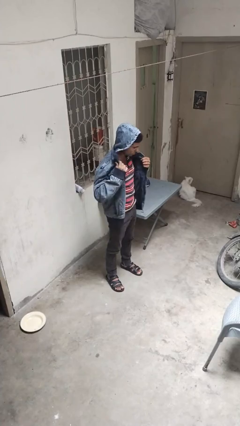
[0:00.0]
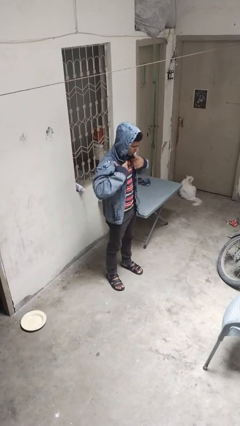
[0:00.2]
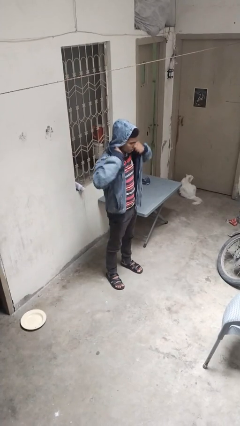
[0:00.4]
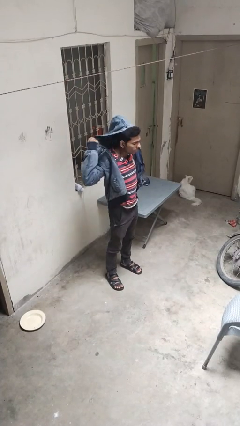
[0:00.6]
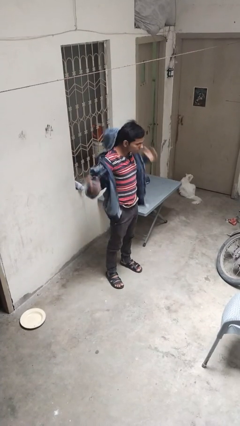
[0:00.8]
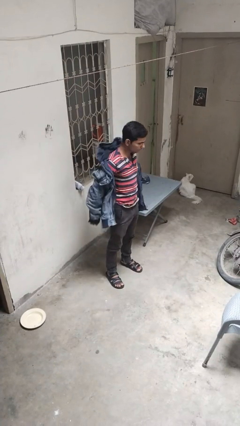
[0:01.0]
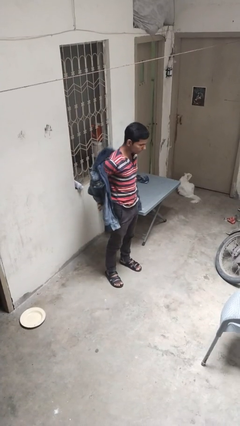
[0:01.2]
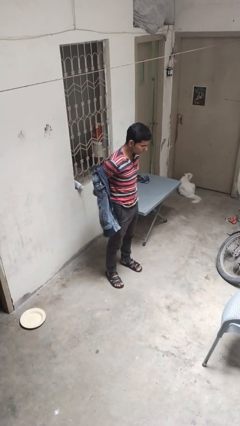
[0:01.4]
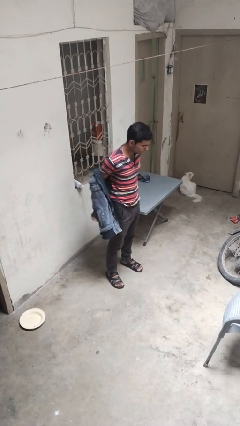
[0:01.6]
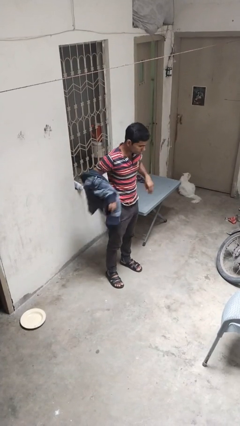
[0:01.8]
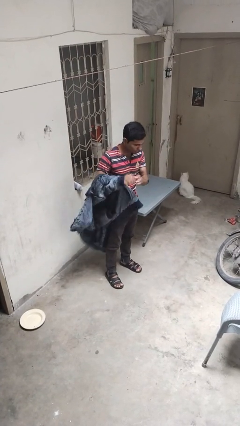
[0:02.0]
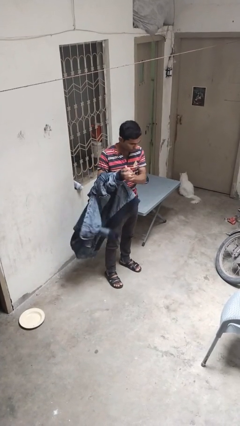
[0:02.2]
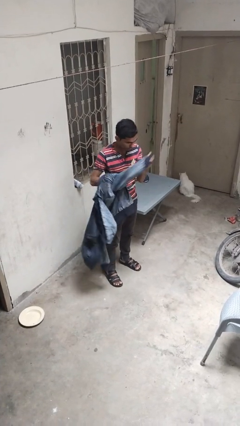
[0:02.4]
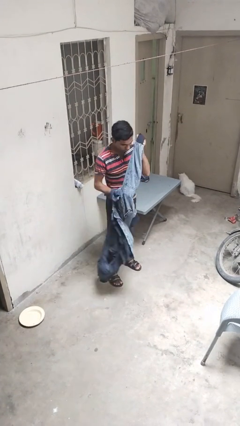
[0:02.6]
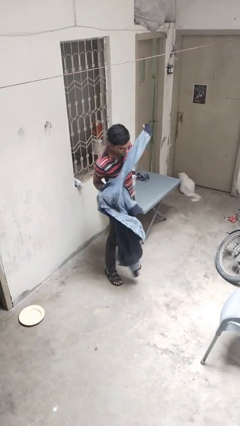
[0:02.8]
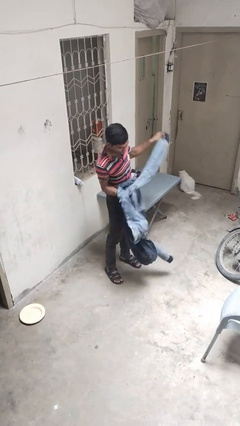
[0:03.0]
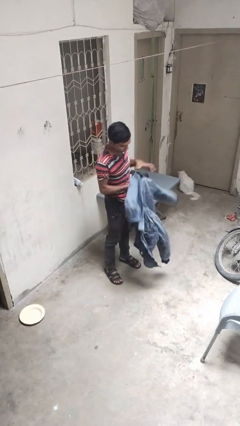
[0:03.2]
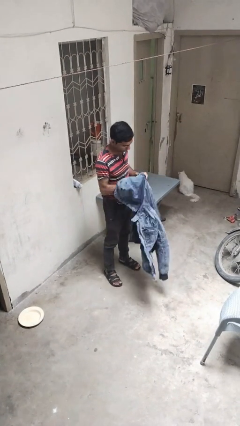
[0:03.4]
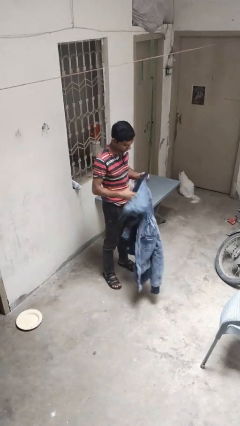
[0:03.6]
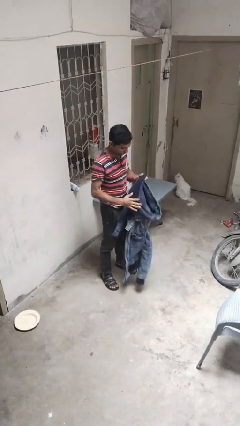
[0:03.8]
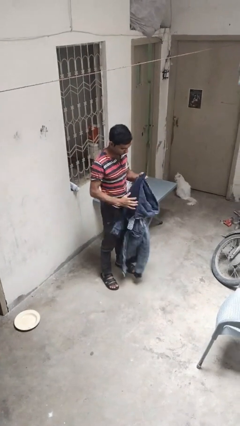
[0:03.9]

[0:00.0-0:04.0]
person takes off hoodie

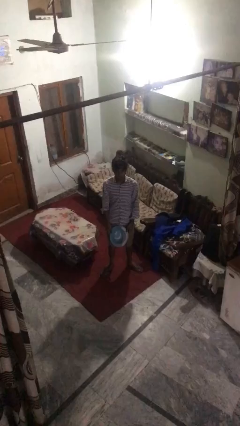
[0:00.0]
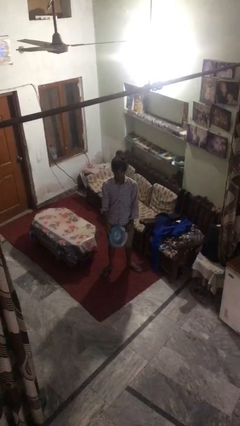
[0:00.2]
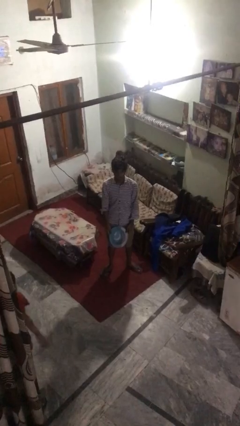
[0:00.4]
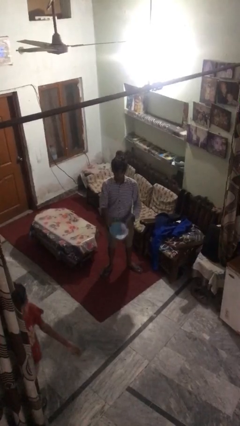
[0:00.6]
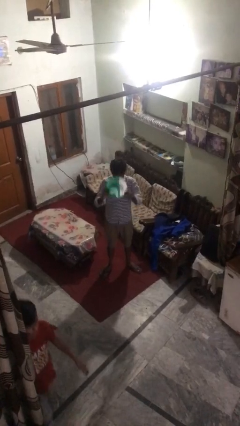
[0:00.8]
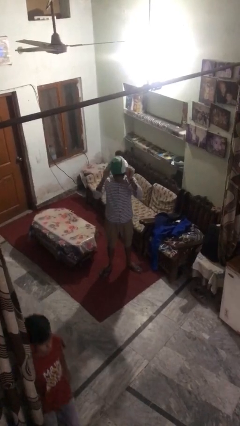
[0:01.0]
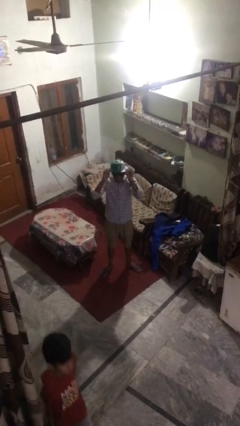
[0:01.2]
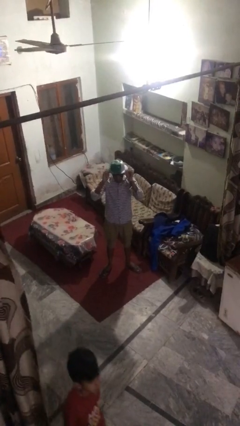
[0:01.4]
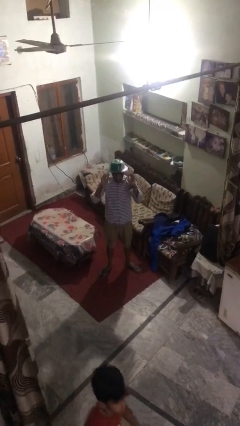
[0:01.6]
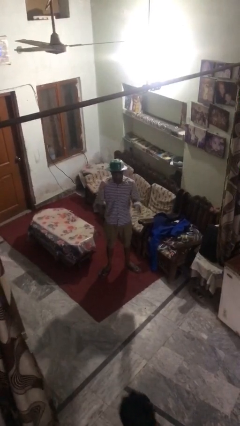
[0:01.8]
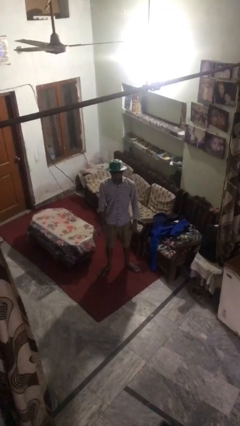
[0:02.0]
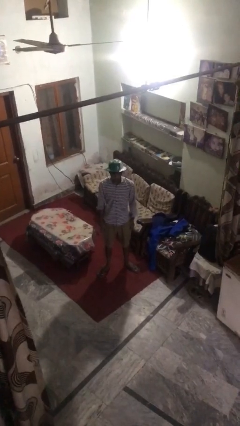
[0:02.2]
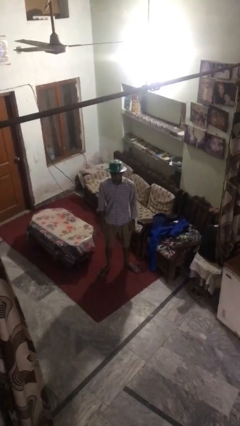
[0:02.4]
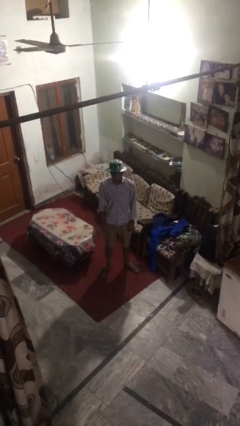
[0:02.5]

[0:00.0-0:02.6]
person puts on hat

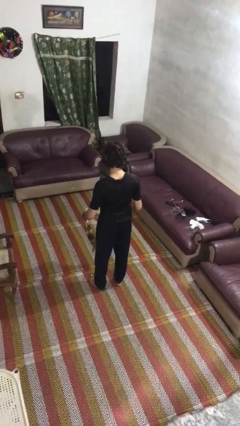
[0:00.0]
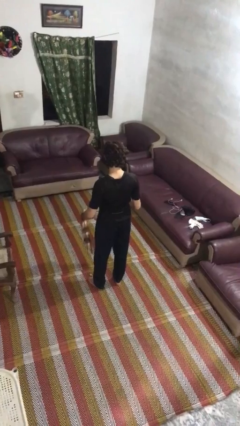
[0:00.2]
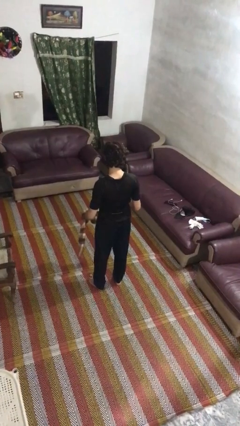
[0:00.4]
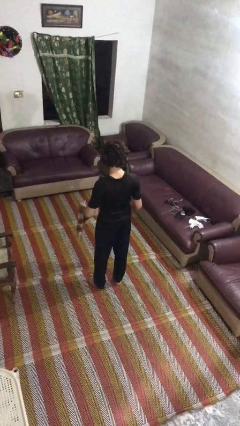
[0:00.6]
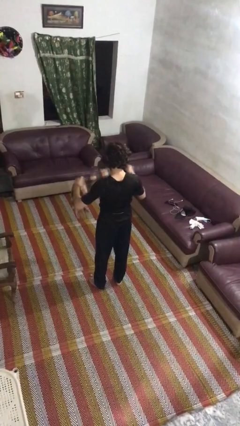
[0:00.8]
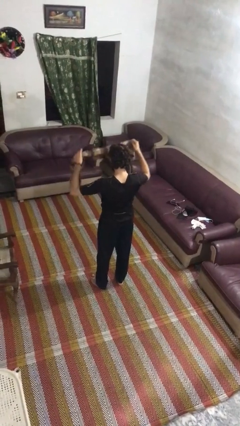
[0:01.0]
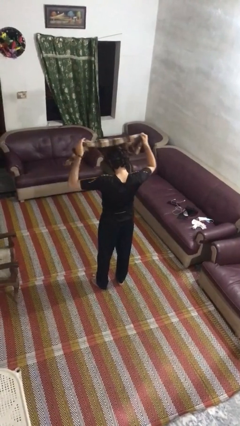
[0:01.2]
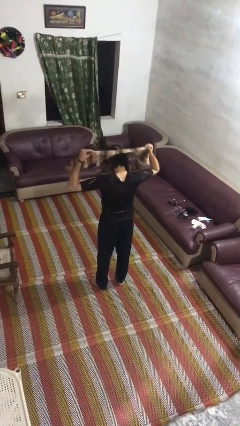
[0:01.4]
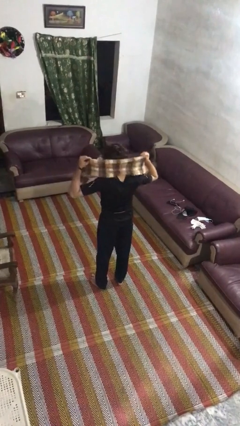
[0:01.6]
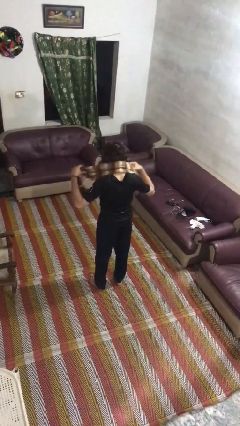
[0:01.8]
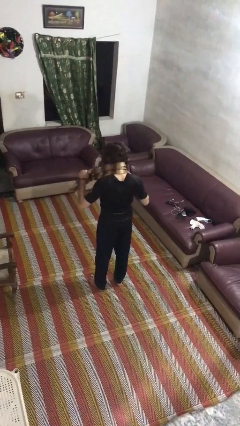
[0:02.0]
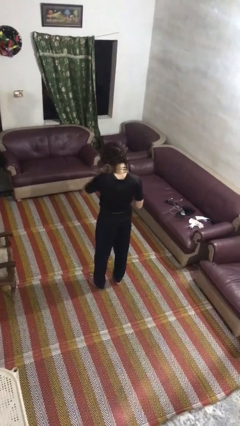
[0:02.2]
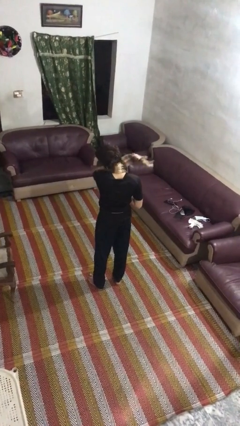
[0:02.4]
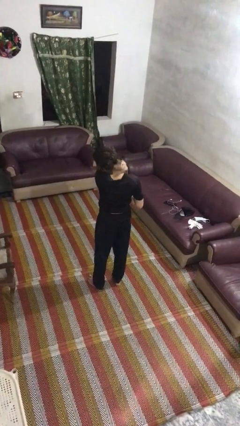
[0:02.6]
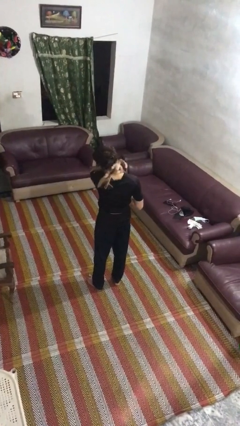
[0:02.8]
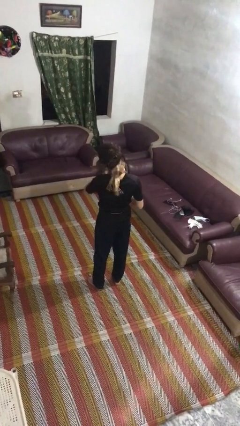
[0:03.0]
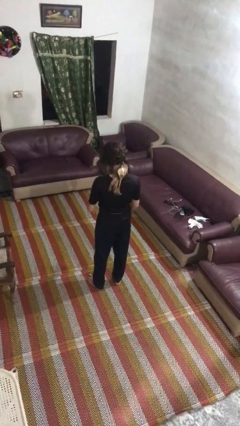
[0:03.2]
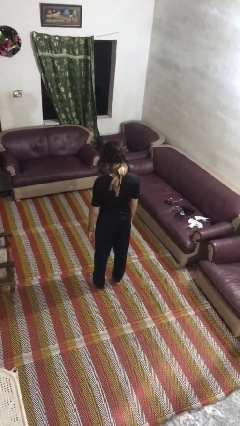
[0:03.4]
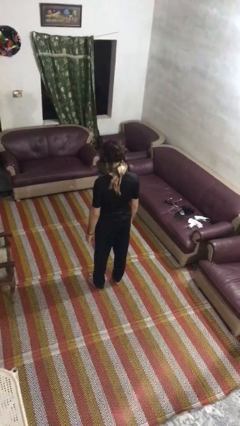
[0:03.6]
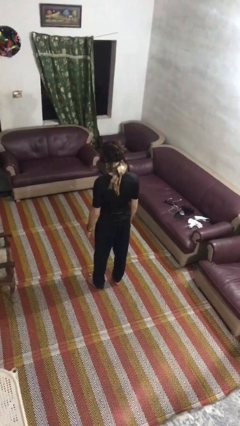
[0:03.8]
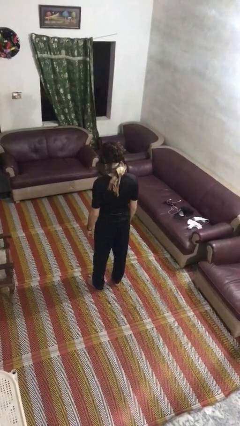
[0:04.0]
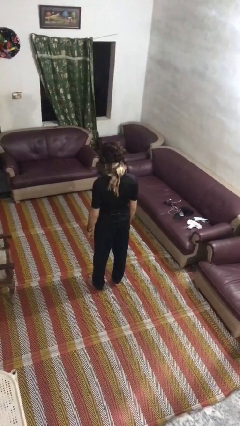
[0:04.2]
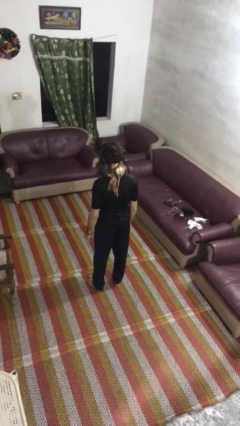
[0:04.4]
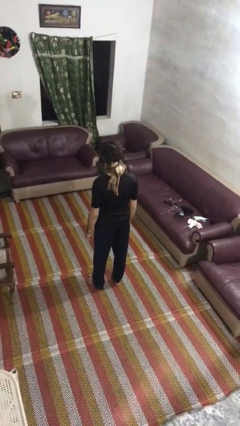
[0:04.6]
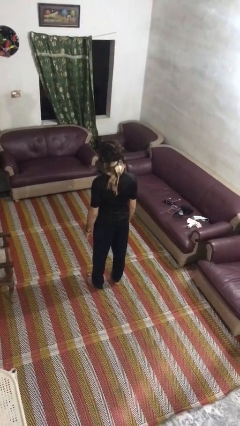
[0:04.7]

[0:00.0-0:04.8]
person puts on scarf

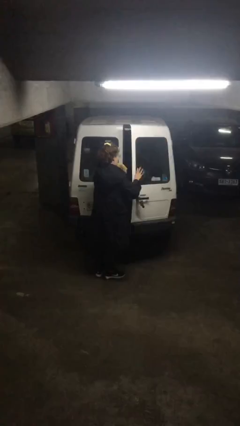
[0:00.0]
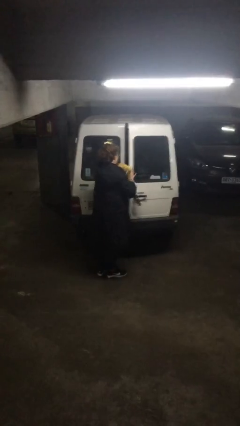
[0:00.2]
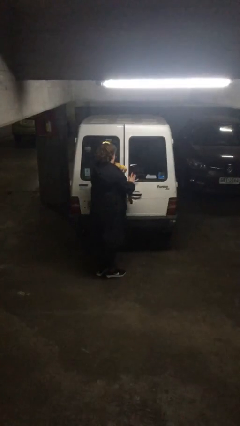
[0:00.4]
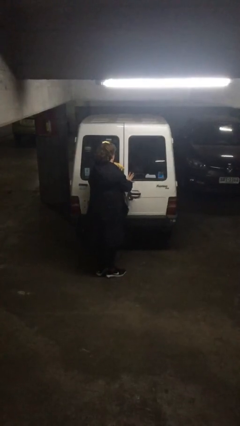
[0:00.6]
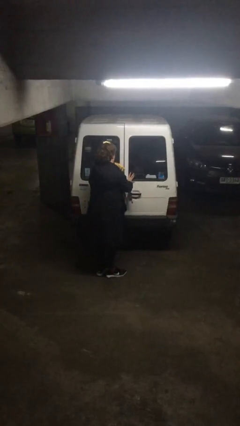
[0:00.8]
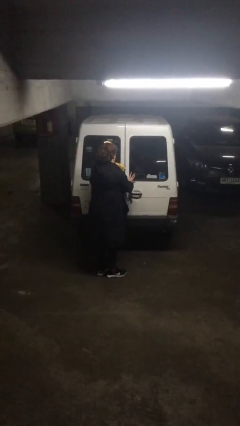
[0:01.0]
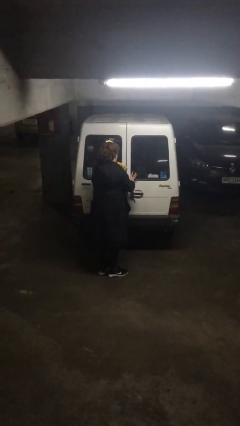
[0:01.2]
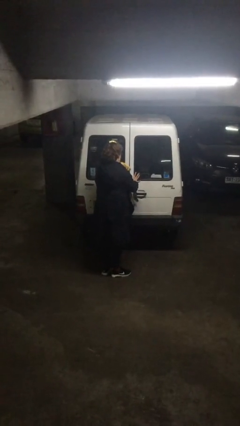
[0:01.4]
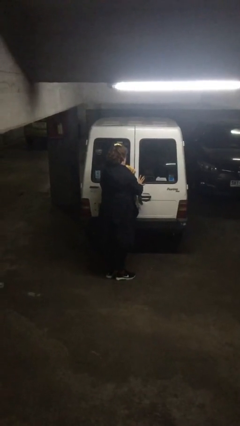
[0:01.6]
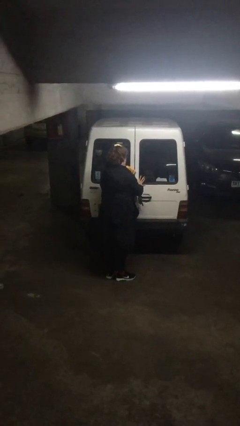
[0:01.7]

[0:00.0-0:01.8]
person closes car door

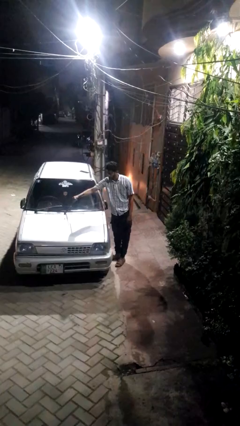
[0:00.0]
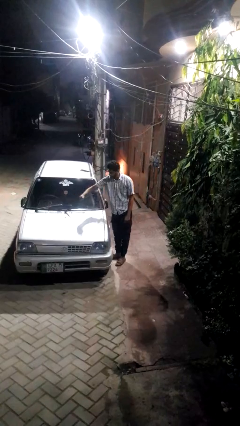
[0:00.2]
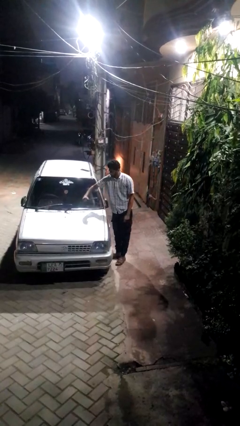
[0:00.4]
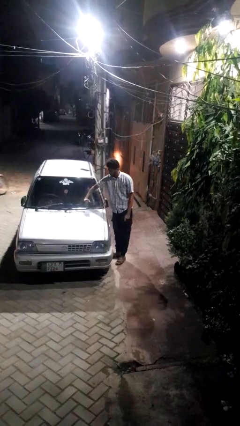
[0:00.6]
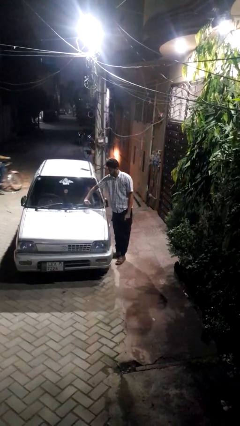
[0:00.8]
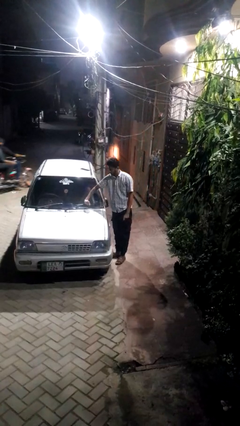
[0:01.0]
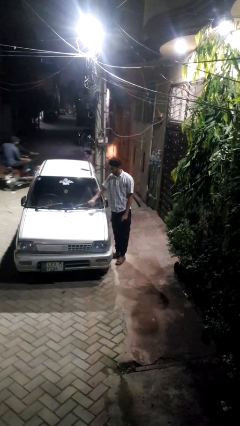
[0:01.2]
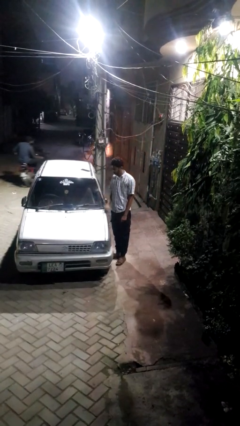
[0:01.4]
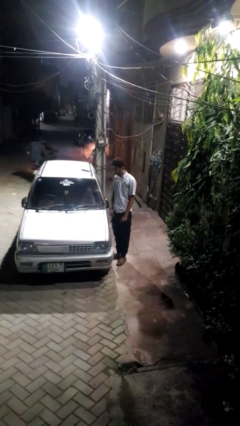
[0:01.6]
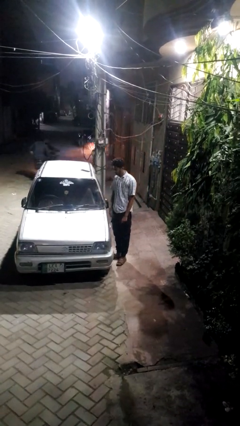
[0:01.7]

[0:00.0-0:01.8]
person flips down car wipers

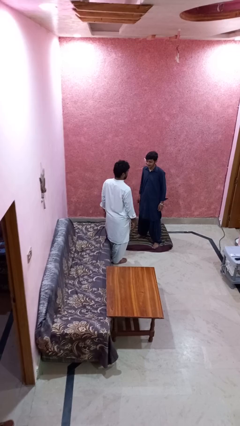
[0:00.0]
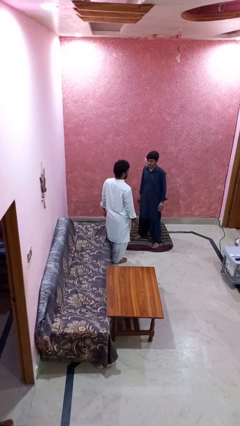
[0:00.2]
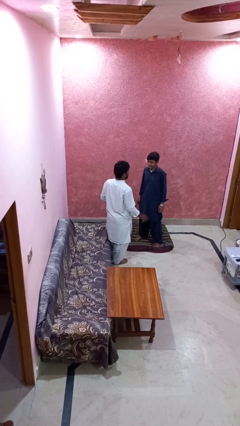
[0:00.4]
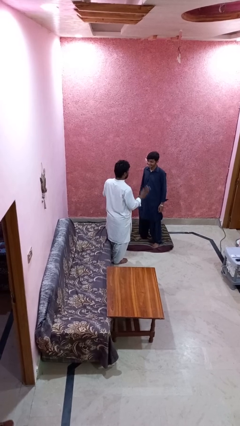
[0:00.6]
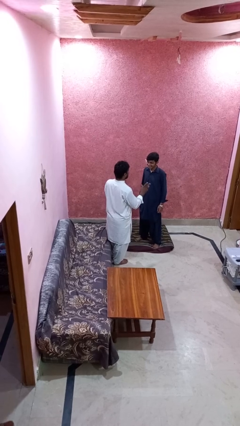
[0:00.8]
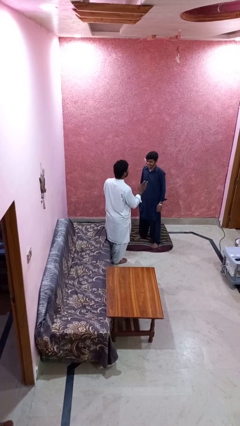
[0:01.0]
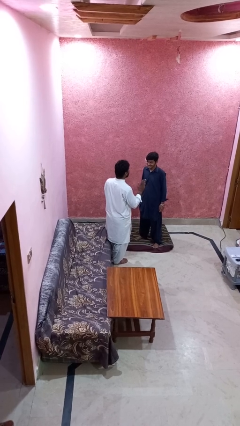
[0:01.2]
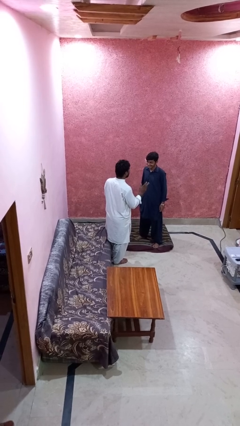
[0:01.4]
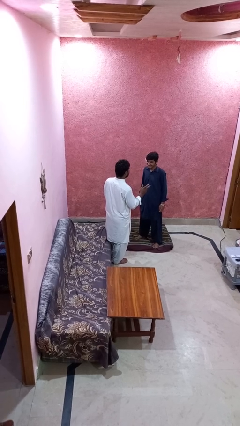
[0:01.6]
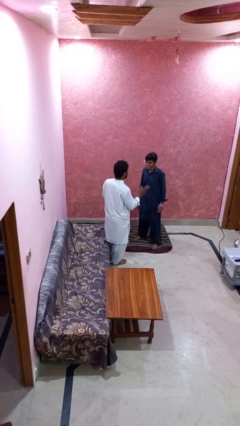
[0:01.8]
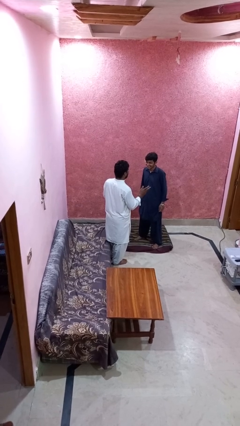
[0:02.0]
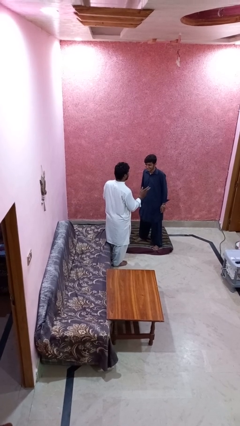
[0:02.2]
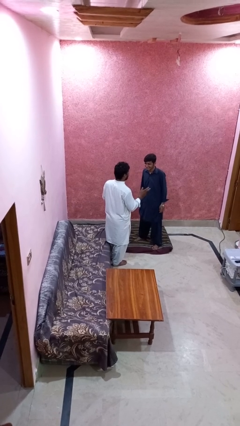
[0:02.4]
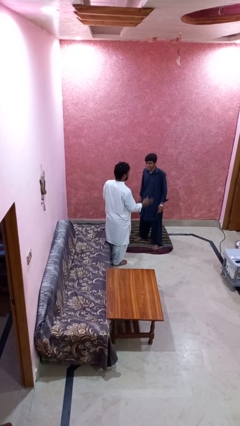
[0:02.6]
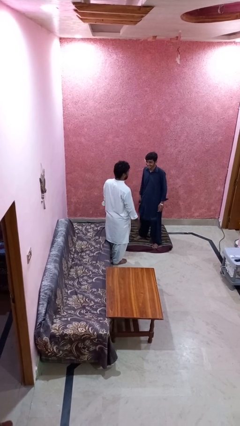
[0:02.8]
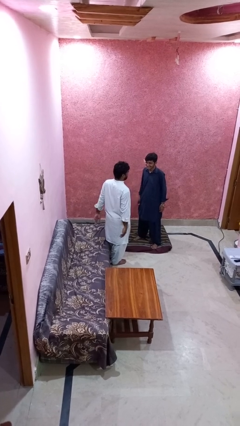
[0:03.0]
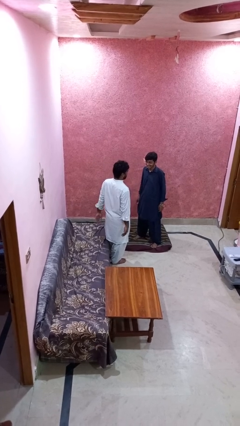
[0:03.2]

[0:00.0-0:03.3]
person laughs with person
